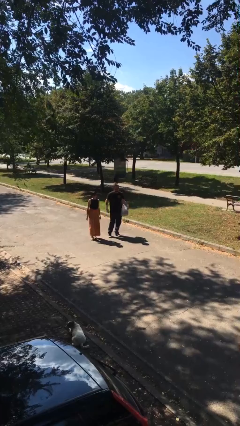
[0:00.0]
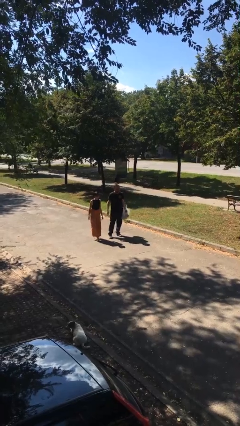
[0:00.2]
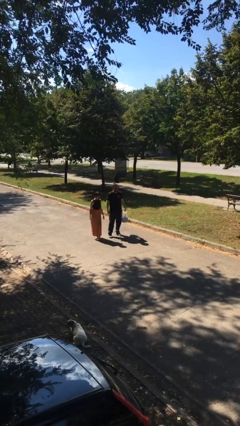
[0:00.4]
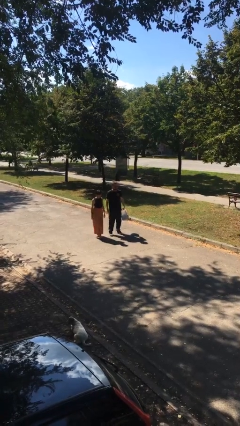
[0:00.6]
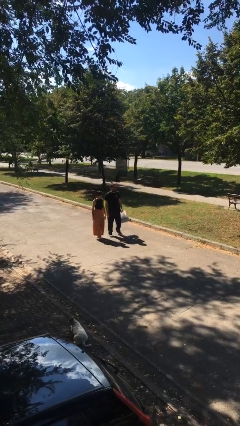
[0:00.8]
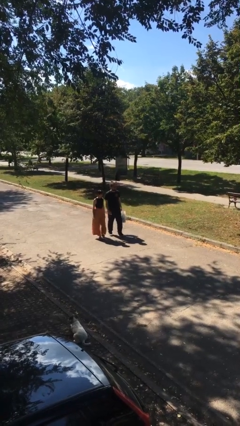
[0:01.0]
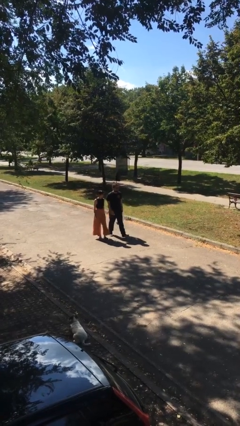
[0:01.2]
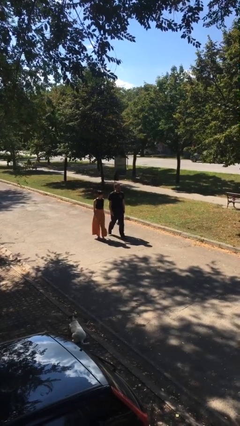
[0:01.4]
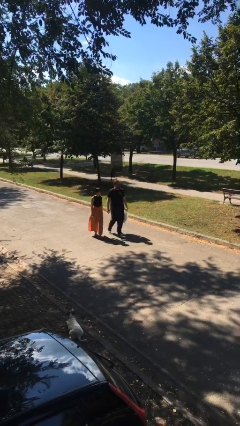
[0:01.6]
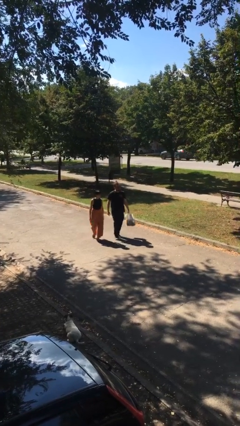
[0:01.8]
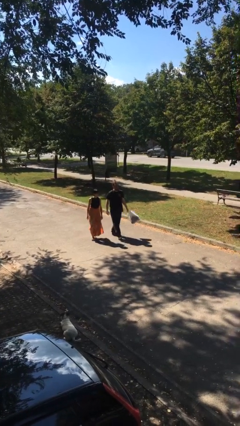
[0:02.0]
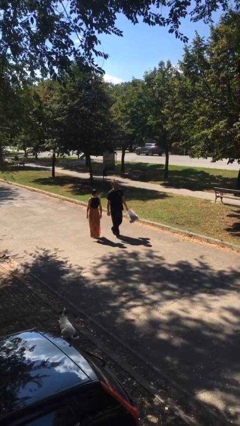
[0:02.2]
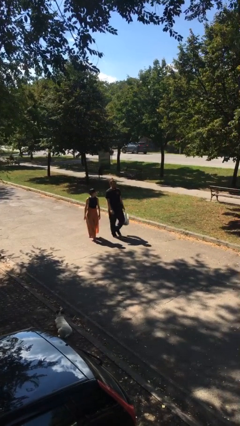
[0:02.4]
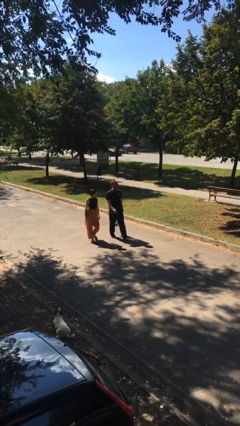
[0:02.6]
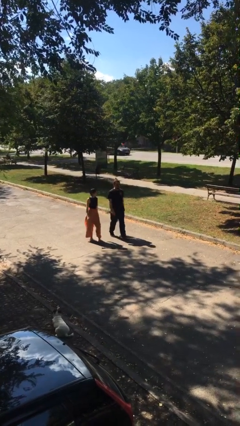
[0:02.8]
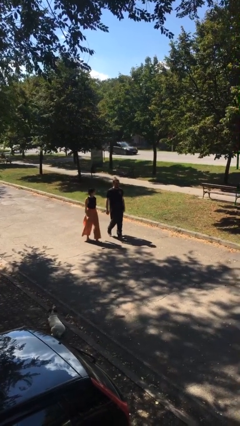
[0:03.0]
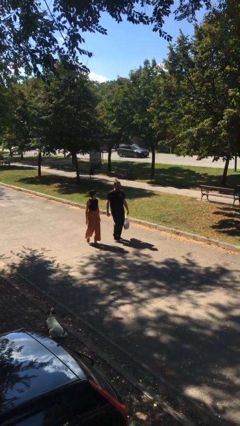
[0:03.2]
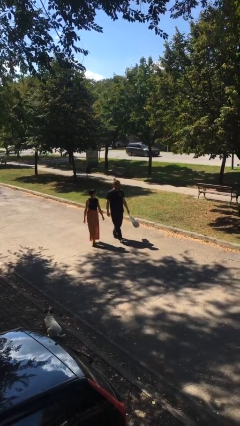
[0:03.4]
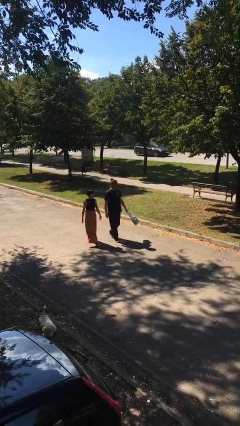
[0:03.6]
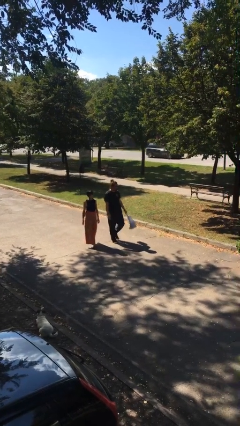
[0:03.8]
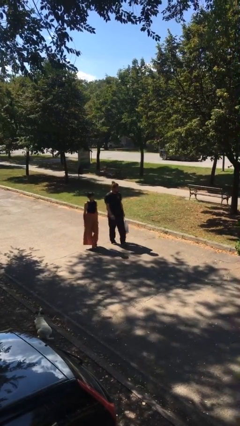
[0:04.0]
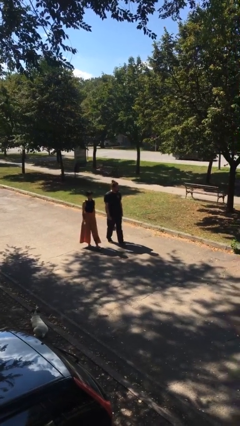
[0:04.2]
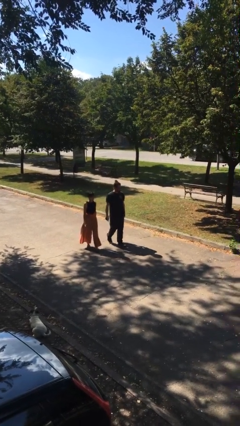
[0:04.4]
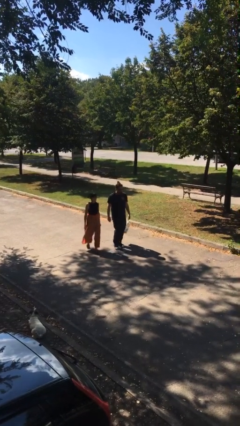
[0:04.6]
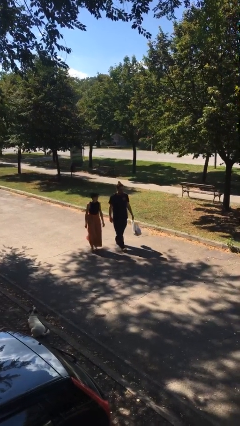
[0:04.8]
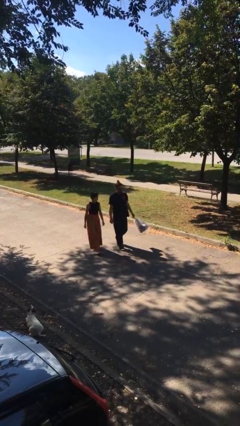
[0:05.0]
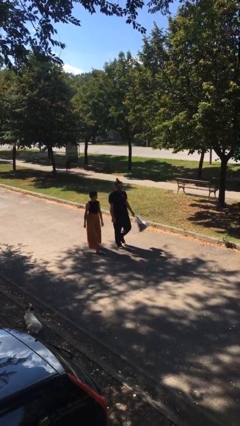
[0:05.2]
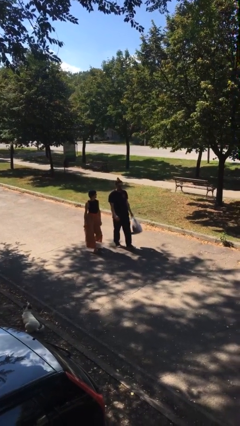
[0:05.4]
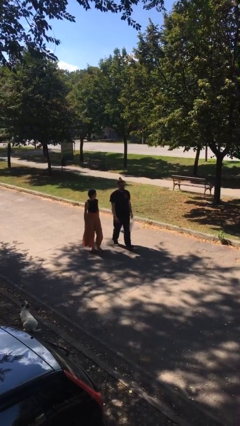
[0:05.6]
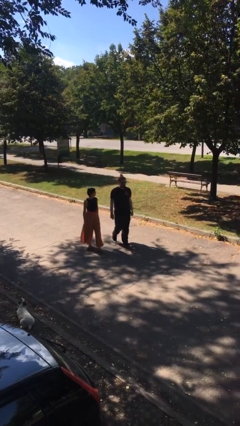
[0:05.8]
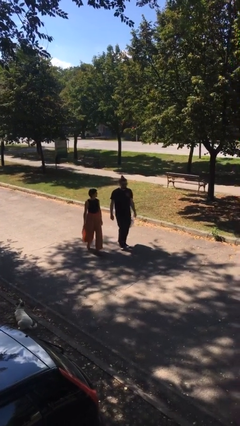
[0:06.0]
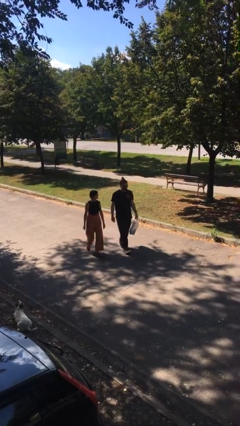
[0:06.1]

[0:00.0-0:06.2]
person talks to person

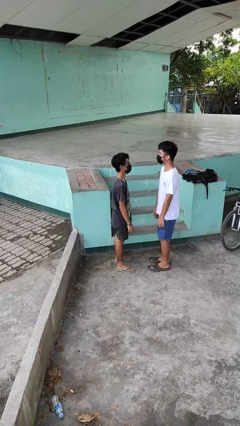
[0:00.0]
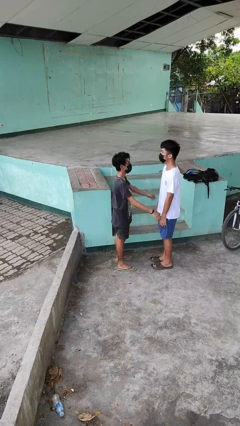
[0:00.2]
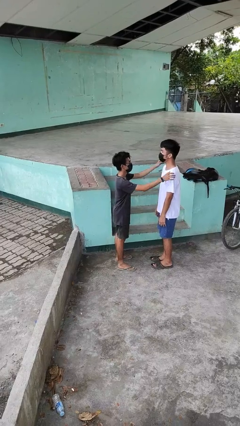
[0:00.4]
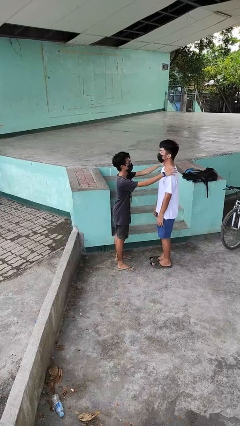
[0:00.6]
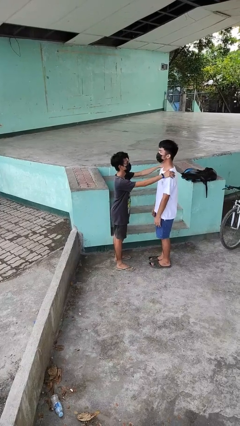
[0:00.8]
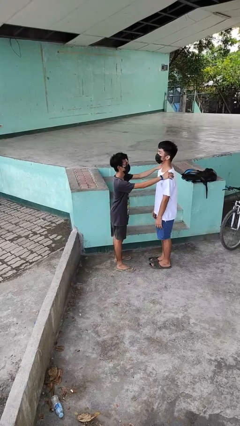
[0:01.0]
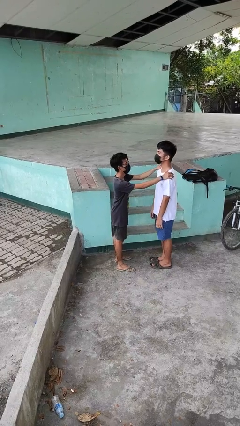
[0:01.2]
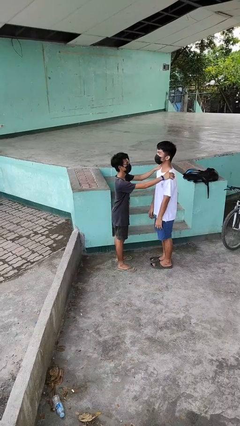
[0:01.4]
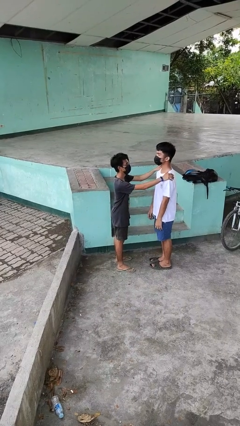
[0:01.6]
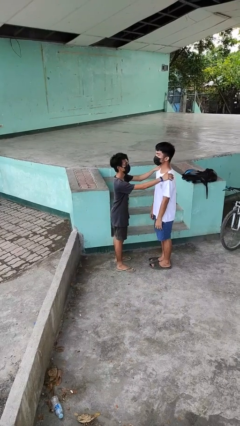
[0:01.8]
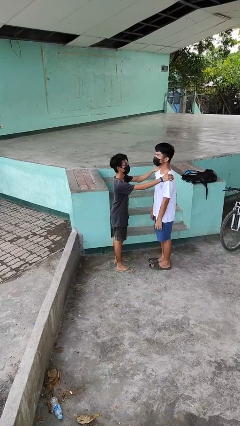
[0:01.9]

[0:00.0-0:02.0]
person grabs person by shoulder

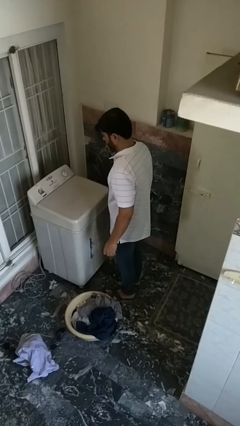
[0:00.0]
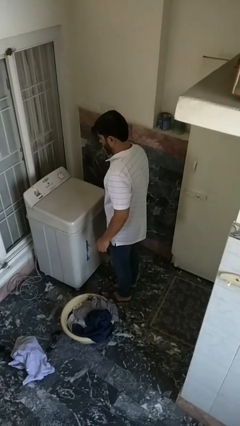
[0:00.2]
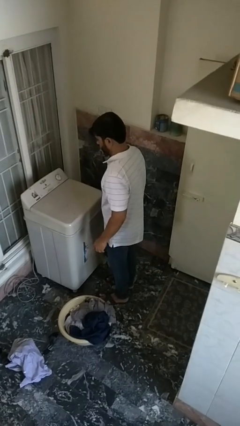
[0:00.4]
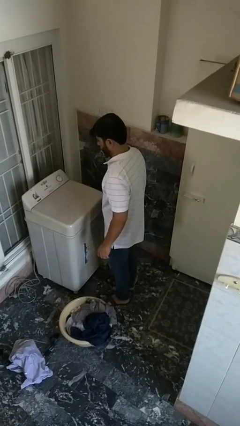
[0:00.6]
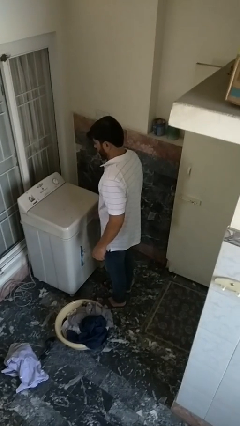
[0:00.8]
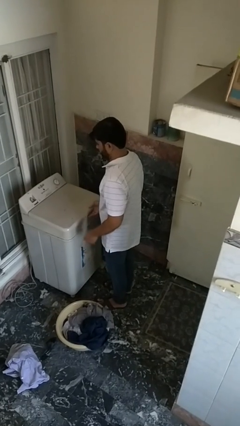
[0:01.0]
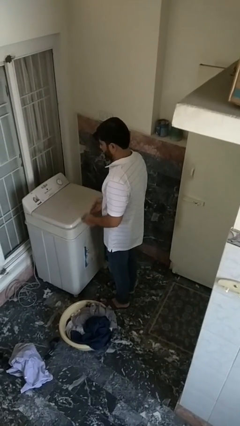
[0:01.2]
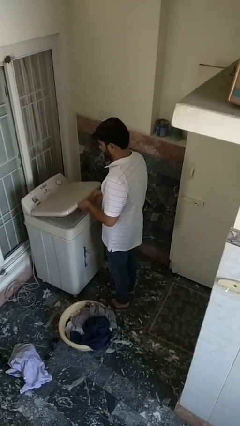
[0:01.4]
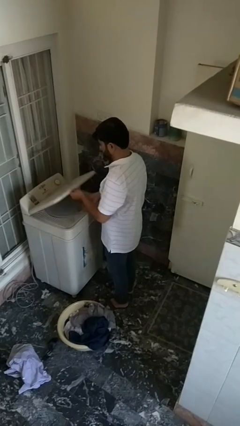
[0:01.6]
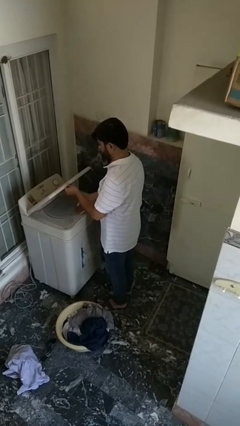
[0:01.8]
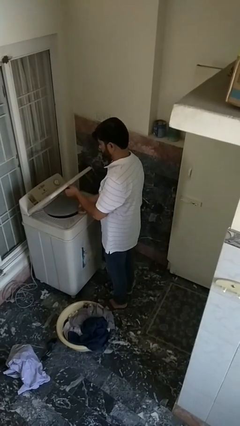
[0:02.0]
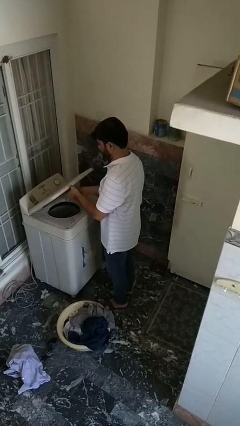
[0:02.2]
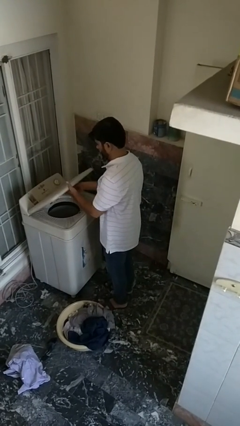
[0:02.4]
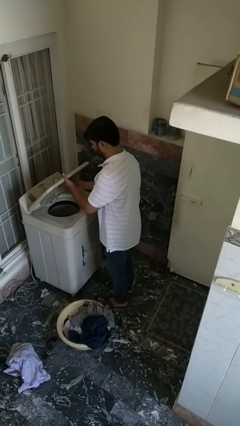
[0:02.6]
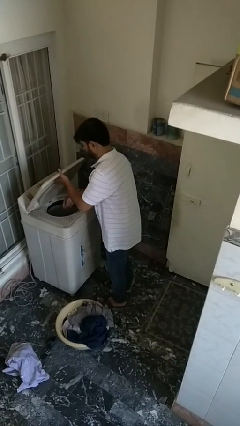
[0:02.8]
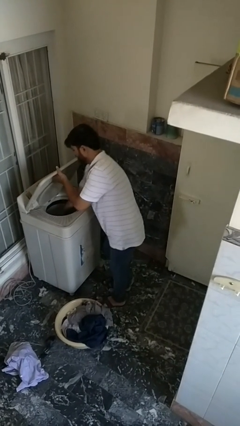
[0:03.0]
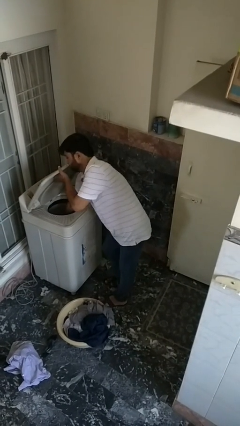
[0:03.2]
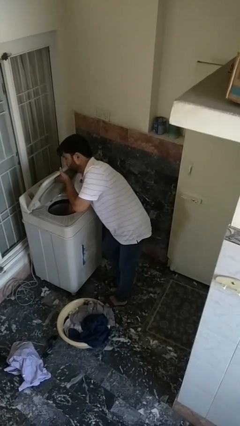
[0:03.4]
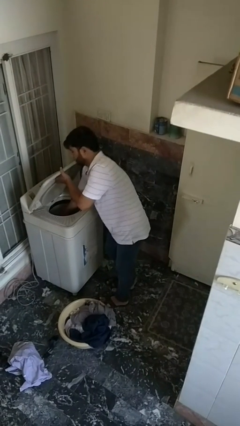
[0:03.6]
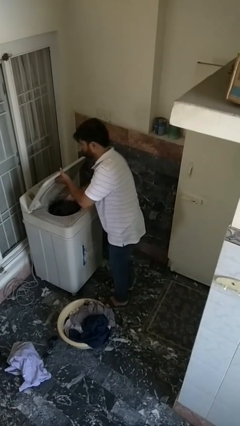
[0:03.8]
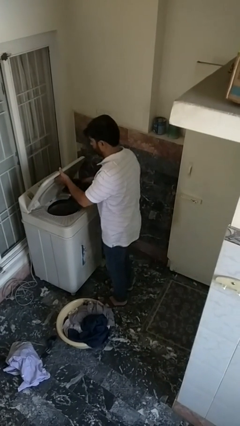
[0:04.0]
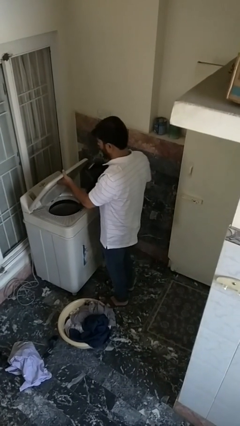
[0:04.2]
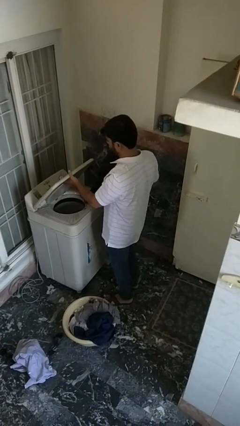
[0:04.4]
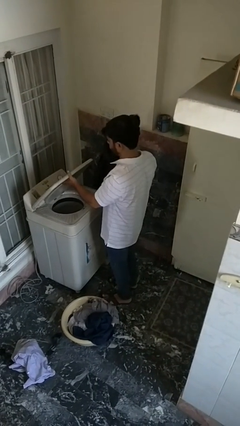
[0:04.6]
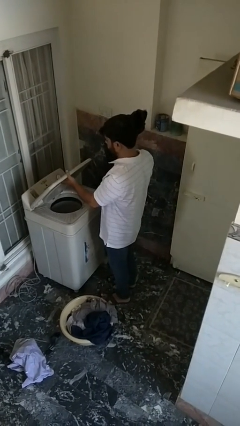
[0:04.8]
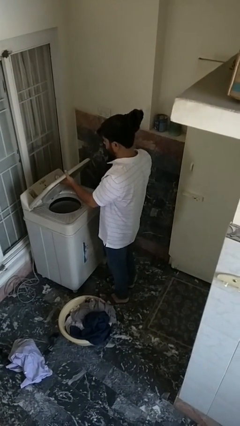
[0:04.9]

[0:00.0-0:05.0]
person unloads dryer

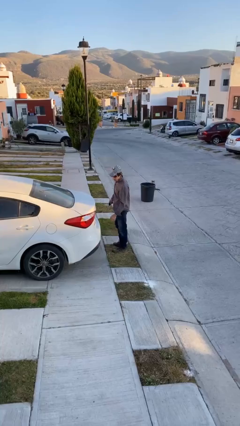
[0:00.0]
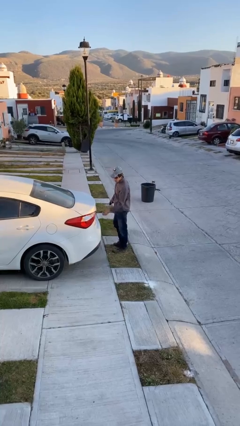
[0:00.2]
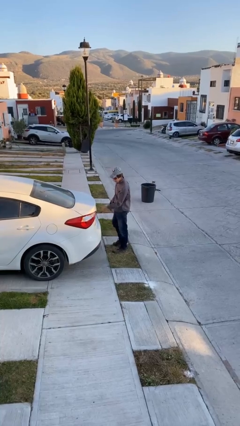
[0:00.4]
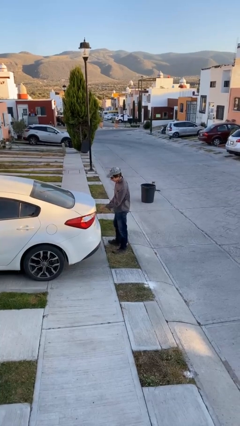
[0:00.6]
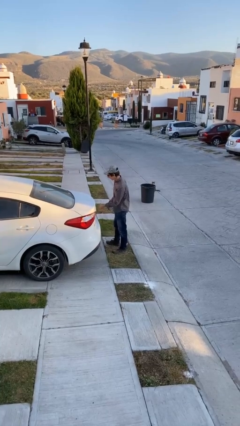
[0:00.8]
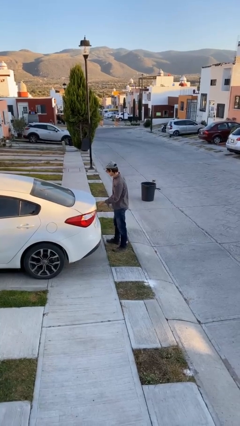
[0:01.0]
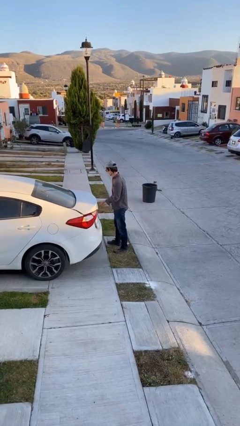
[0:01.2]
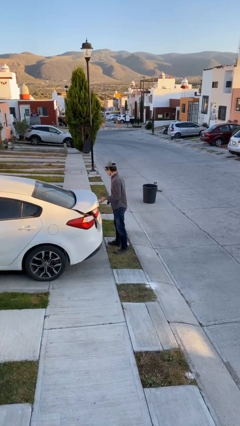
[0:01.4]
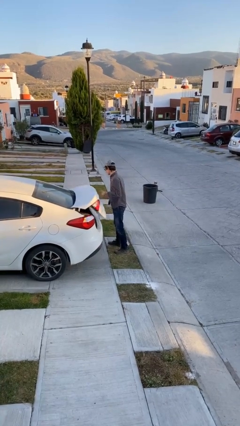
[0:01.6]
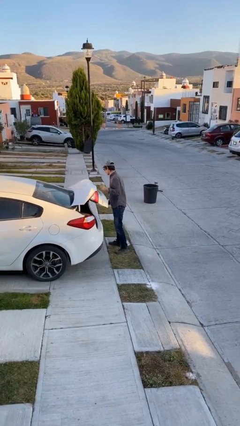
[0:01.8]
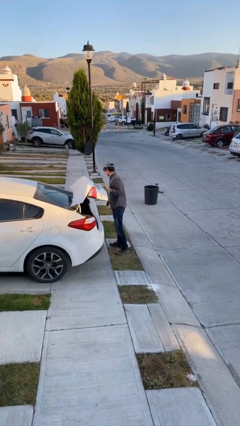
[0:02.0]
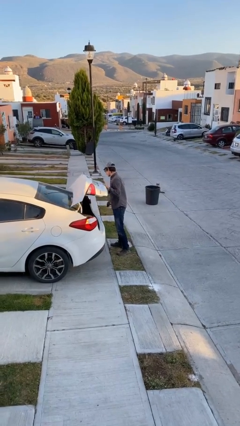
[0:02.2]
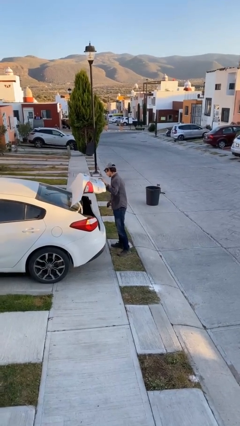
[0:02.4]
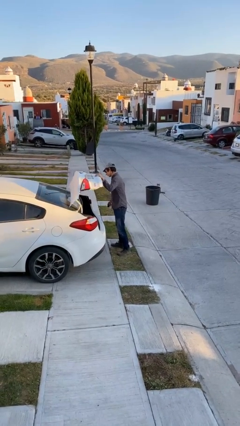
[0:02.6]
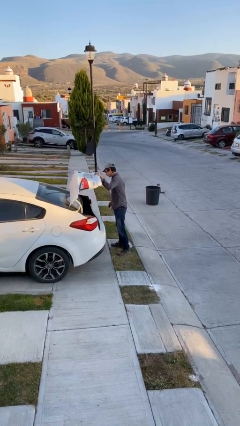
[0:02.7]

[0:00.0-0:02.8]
person opens car trunk

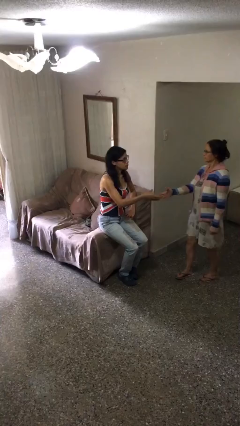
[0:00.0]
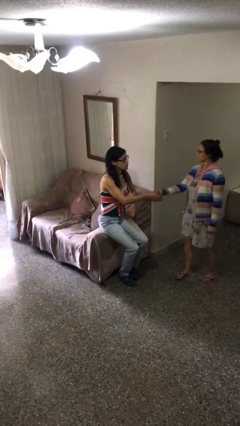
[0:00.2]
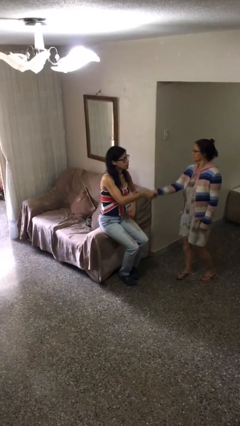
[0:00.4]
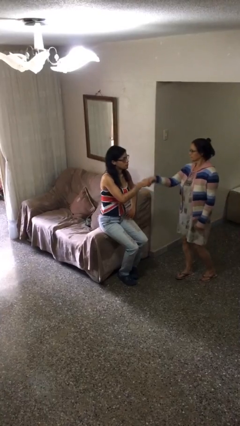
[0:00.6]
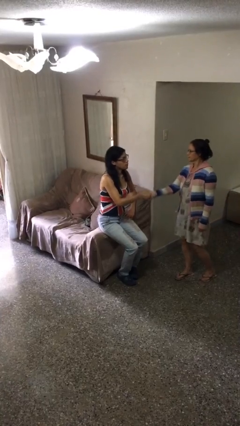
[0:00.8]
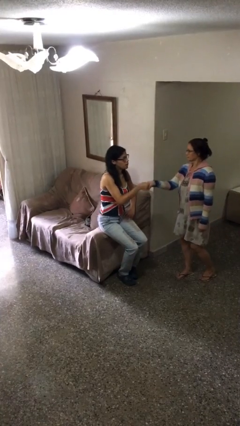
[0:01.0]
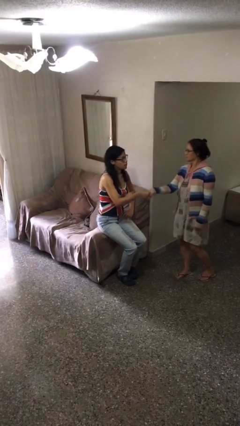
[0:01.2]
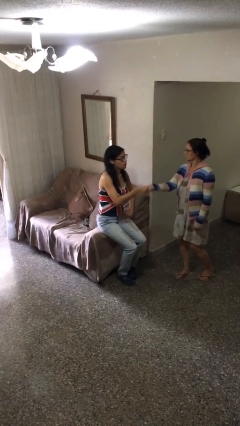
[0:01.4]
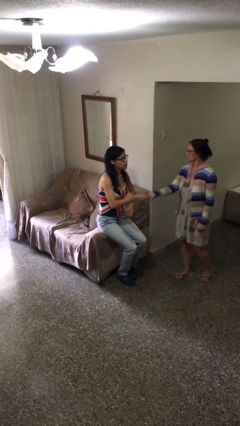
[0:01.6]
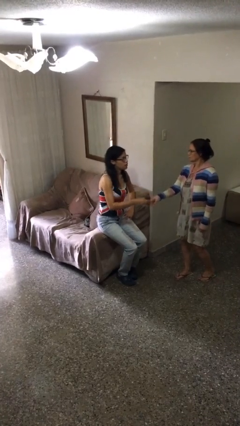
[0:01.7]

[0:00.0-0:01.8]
person shakes hand

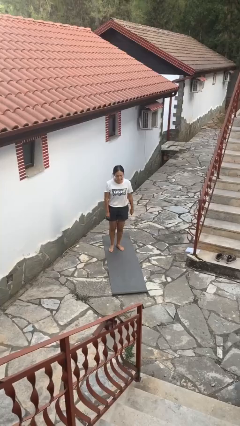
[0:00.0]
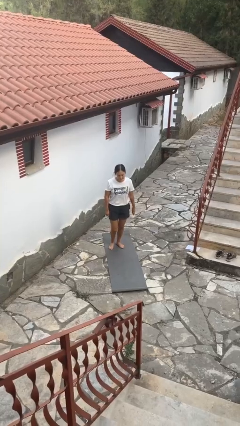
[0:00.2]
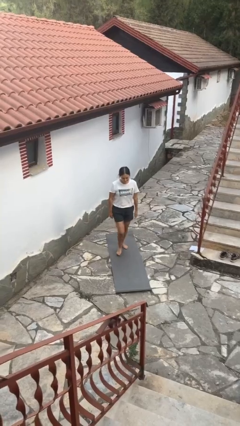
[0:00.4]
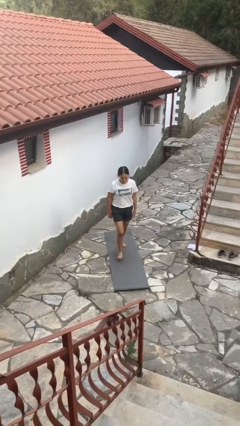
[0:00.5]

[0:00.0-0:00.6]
person exercises with lunges
